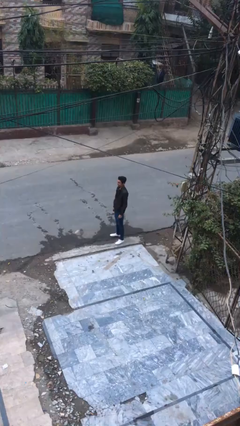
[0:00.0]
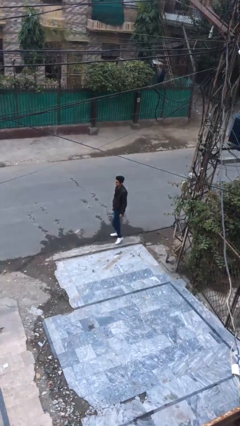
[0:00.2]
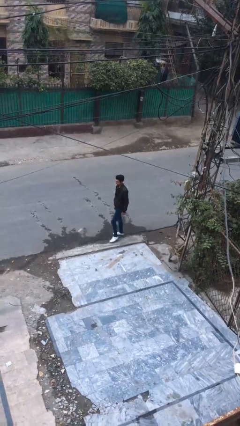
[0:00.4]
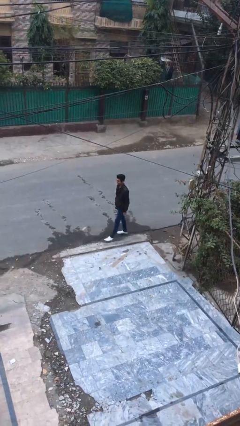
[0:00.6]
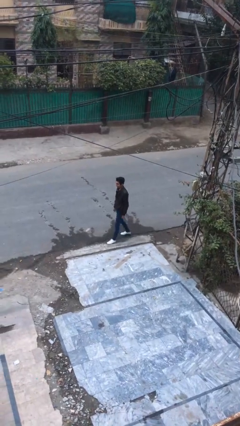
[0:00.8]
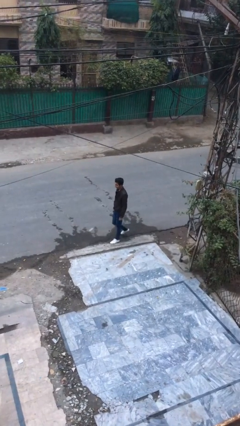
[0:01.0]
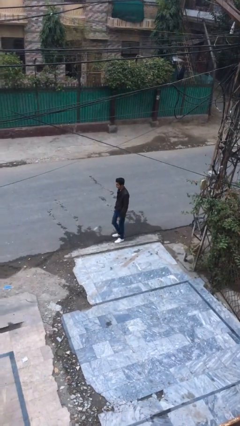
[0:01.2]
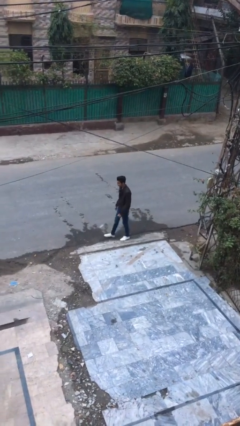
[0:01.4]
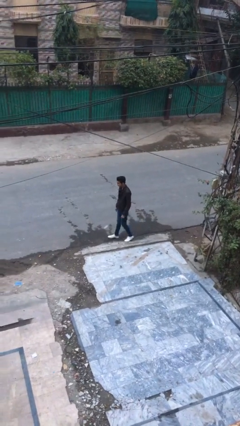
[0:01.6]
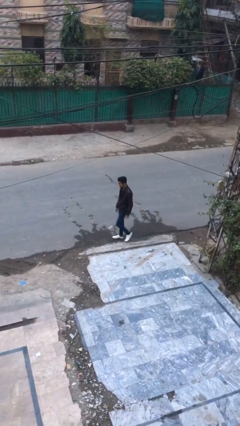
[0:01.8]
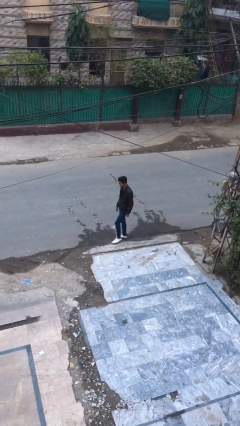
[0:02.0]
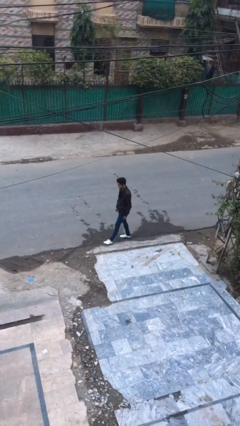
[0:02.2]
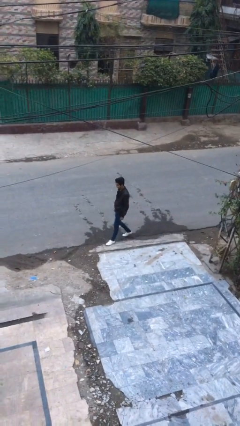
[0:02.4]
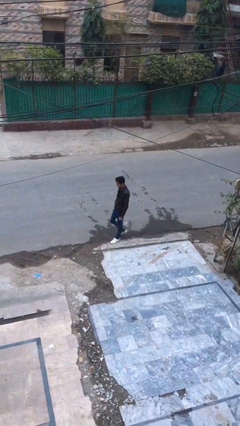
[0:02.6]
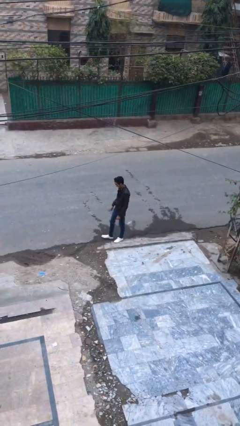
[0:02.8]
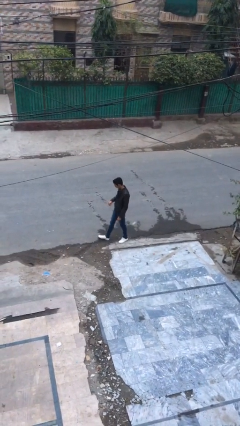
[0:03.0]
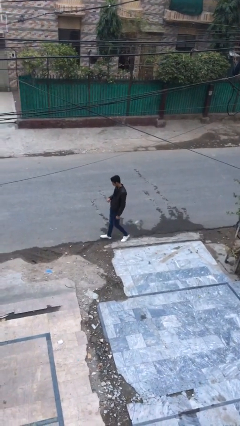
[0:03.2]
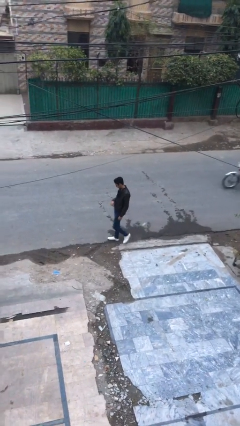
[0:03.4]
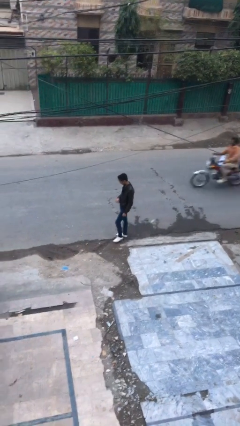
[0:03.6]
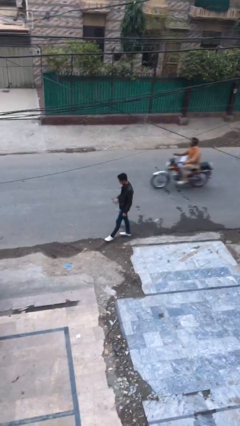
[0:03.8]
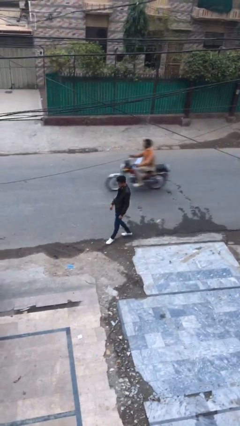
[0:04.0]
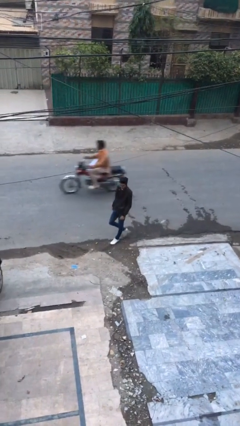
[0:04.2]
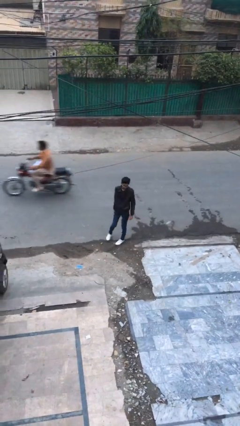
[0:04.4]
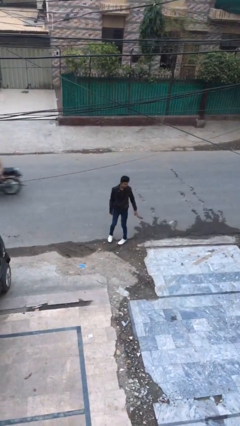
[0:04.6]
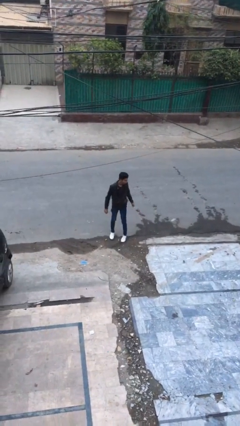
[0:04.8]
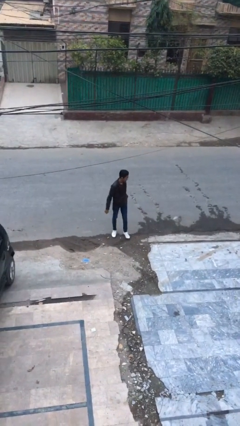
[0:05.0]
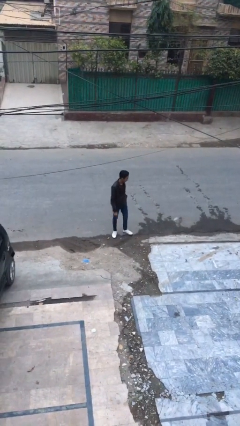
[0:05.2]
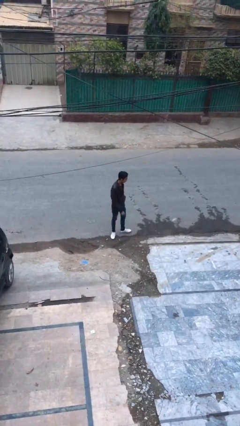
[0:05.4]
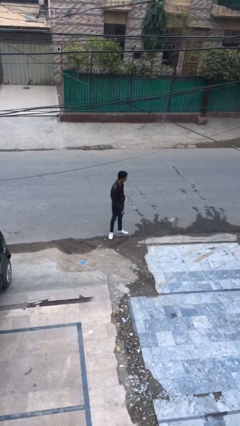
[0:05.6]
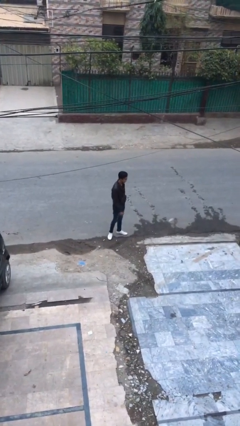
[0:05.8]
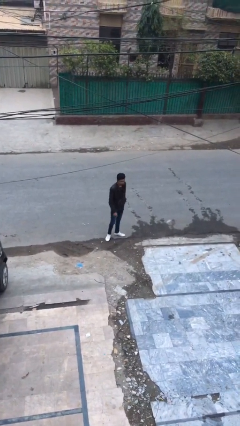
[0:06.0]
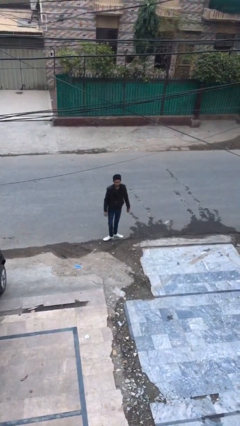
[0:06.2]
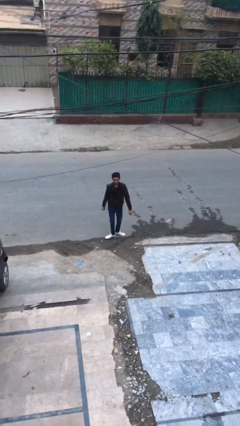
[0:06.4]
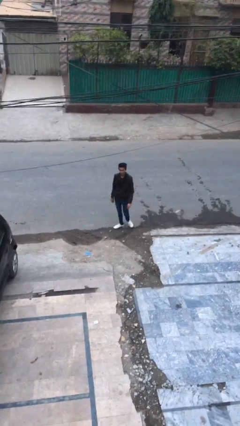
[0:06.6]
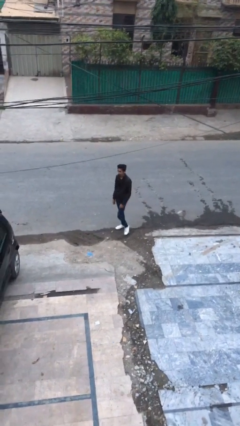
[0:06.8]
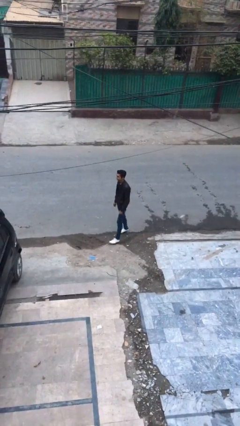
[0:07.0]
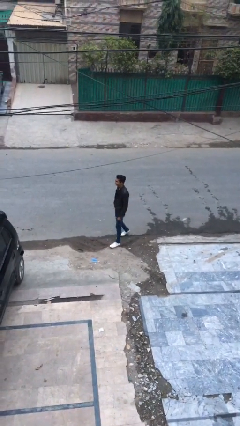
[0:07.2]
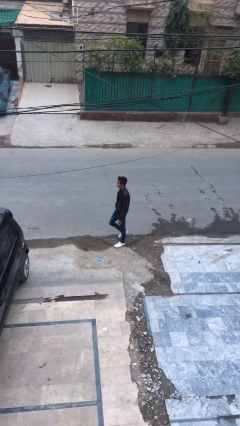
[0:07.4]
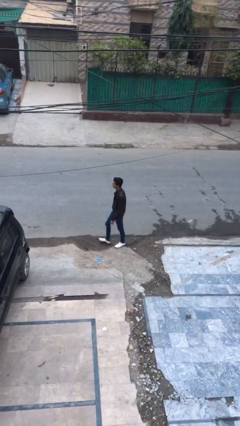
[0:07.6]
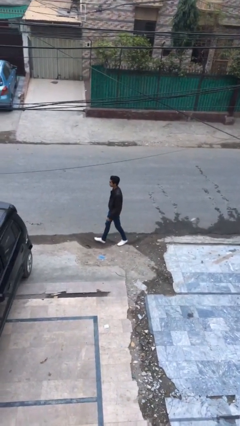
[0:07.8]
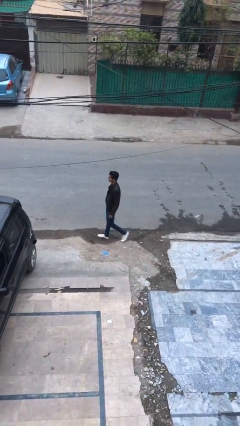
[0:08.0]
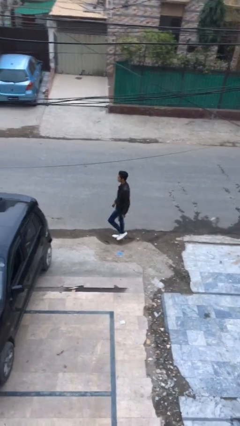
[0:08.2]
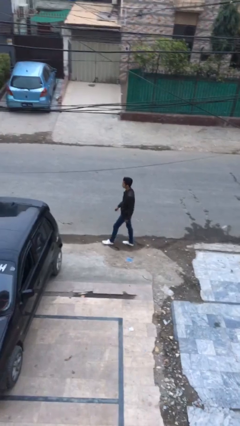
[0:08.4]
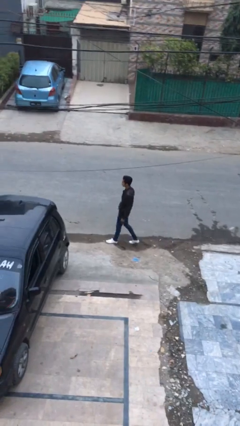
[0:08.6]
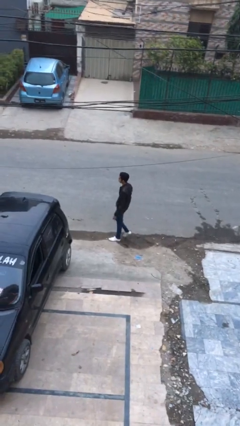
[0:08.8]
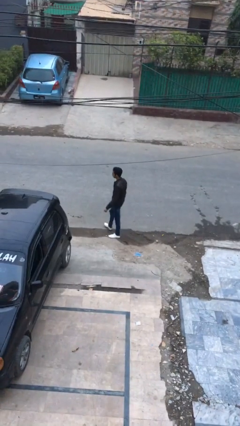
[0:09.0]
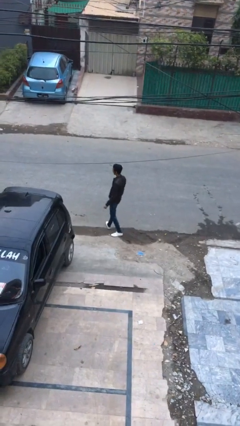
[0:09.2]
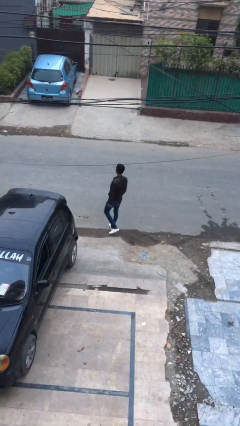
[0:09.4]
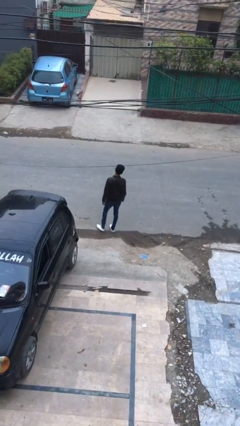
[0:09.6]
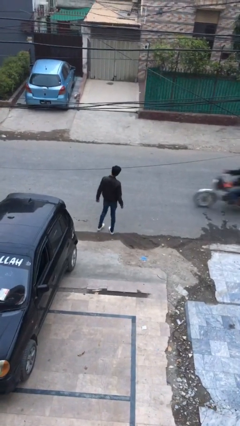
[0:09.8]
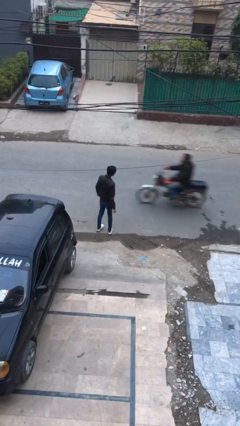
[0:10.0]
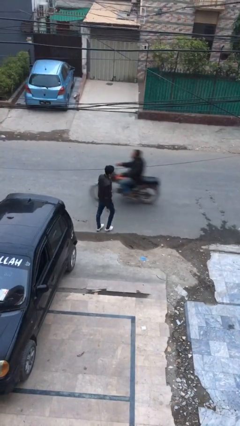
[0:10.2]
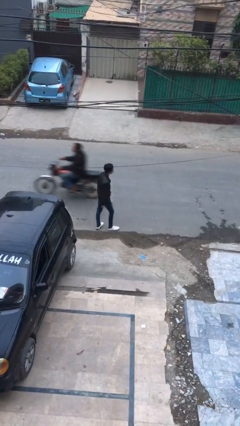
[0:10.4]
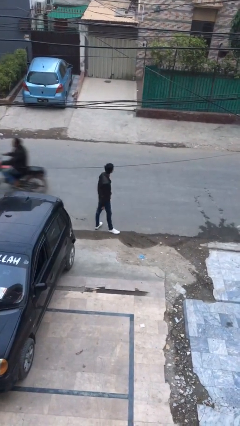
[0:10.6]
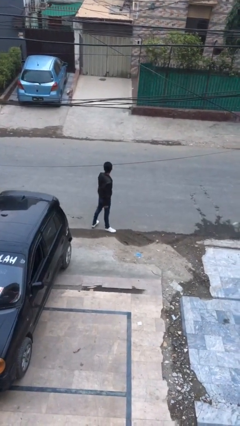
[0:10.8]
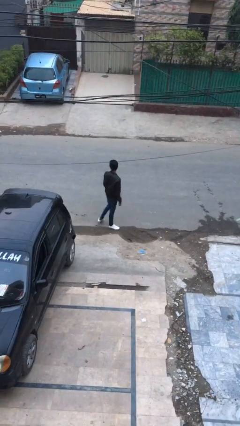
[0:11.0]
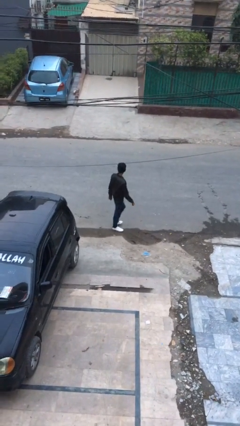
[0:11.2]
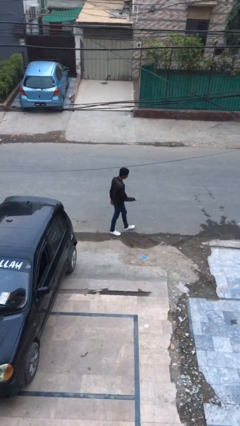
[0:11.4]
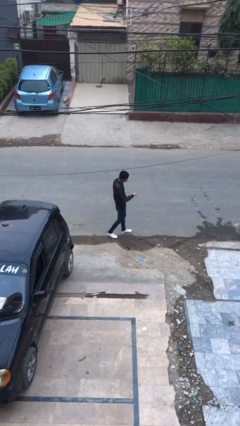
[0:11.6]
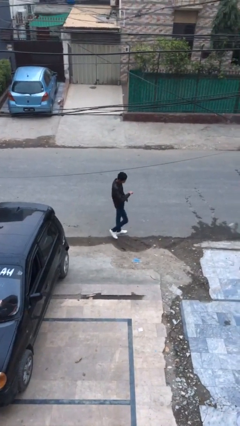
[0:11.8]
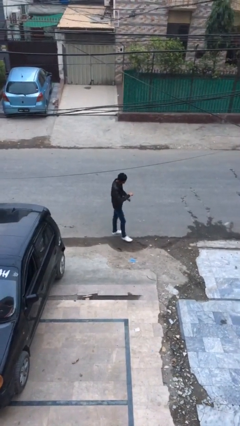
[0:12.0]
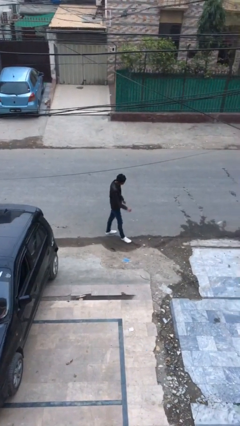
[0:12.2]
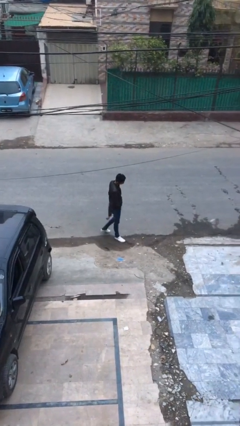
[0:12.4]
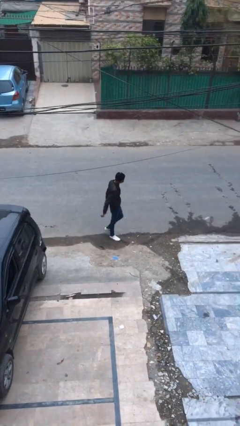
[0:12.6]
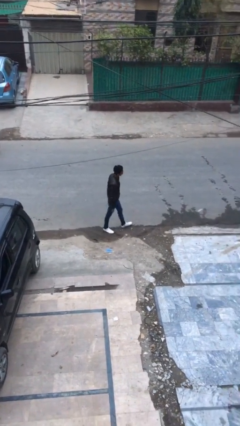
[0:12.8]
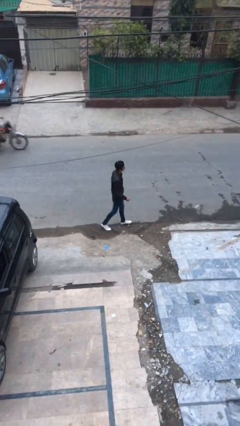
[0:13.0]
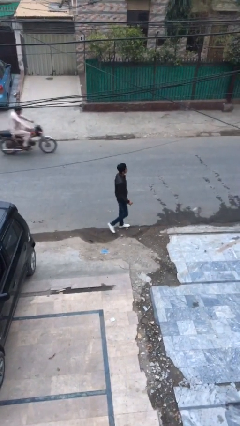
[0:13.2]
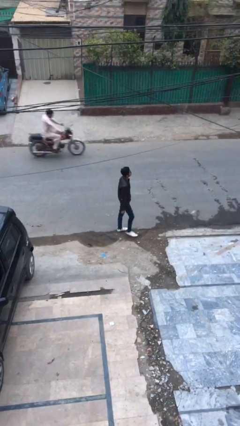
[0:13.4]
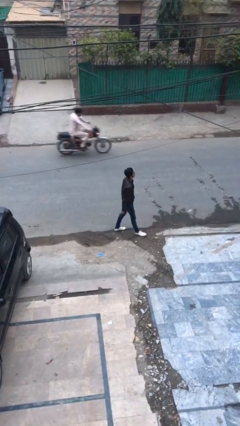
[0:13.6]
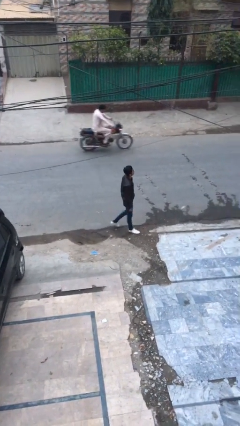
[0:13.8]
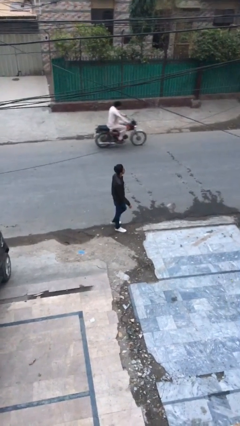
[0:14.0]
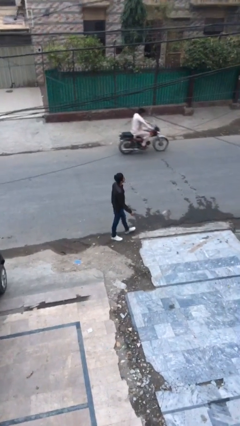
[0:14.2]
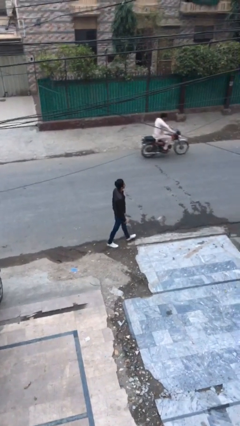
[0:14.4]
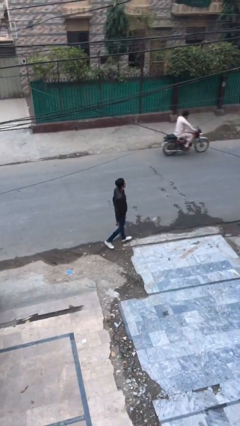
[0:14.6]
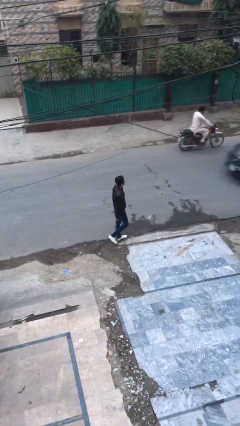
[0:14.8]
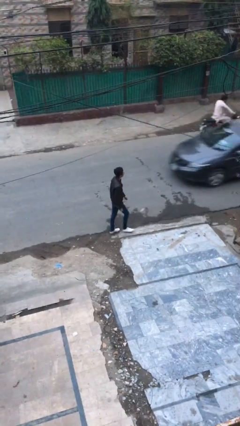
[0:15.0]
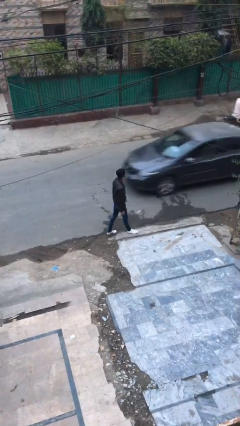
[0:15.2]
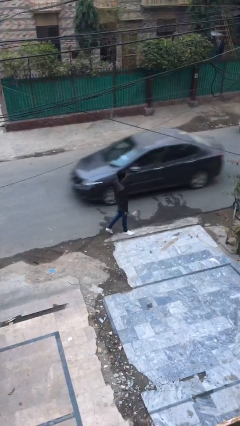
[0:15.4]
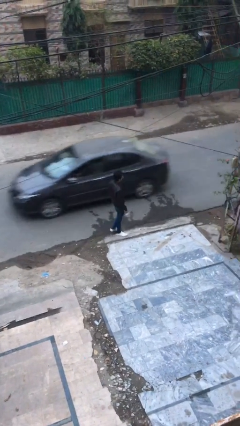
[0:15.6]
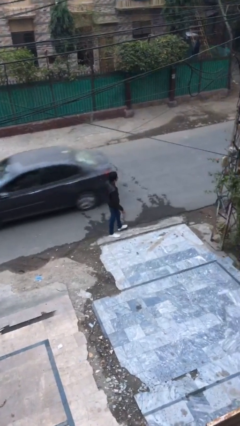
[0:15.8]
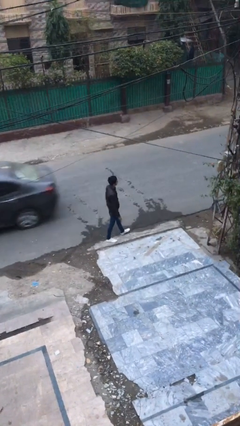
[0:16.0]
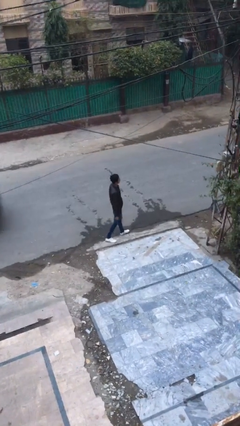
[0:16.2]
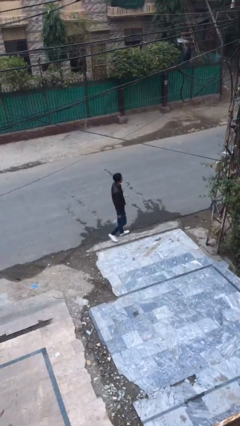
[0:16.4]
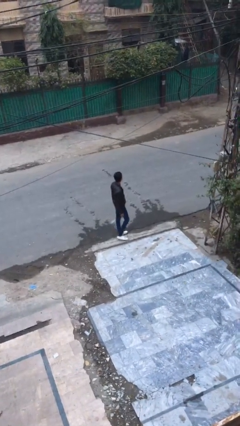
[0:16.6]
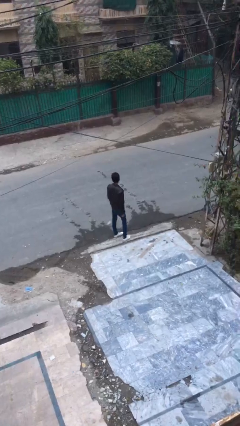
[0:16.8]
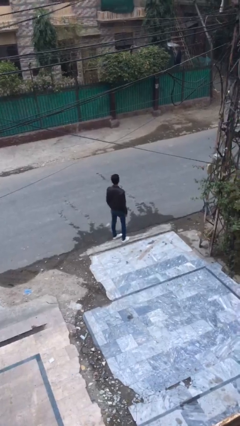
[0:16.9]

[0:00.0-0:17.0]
person walks

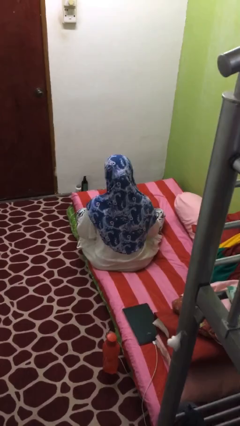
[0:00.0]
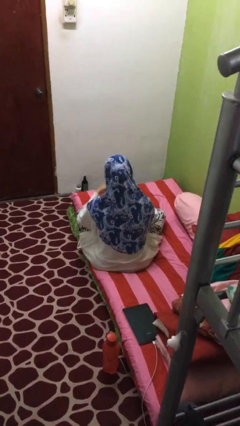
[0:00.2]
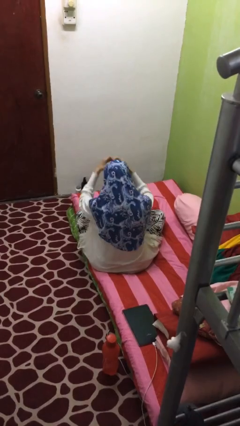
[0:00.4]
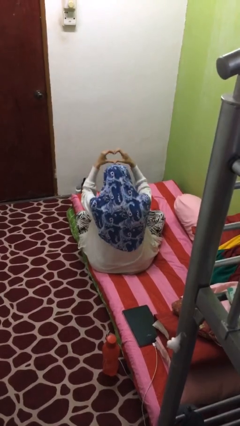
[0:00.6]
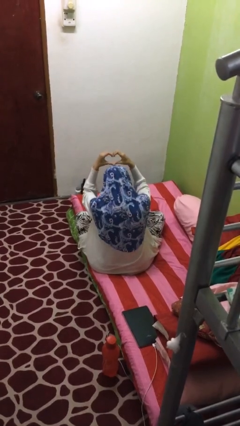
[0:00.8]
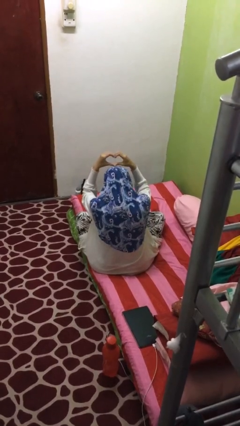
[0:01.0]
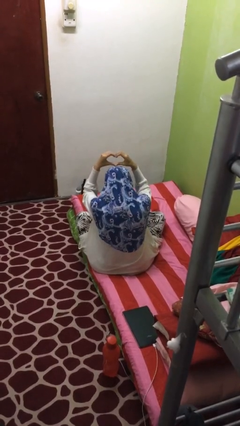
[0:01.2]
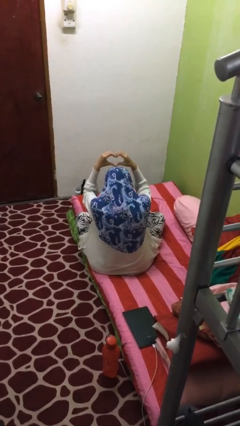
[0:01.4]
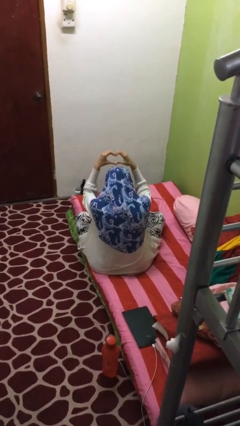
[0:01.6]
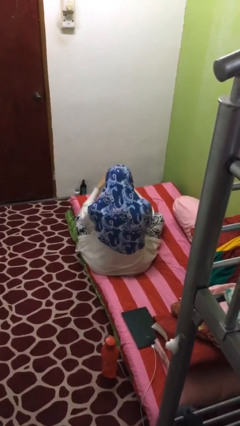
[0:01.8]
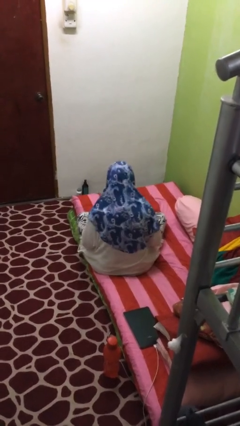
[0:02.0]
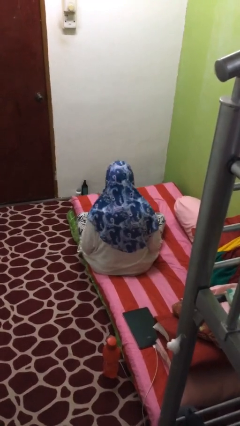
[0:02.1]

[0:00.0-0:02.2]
person gestures heart
